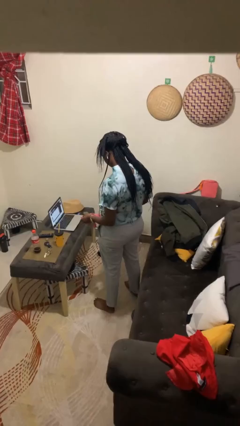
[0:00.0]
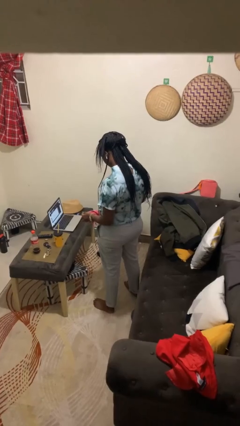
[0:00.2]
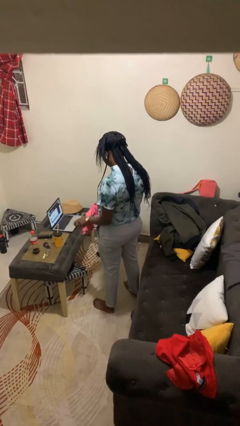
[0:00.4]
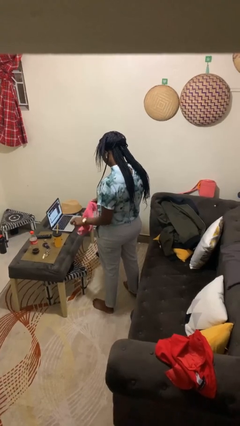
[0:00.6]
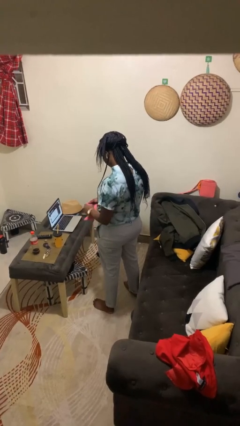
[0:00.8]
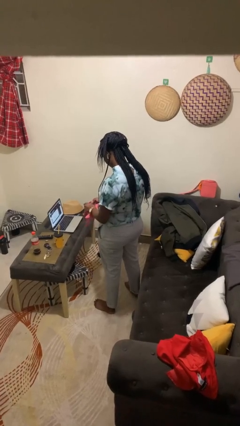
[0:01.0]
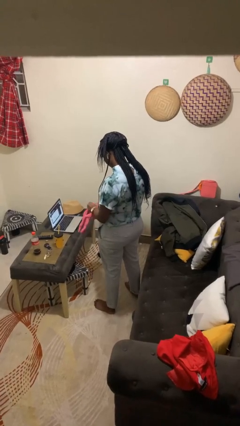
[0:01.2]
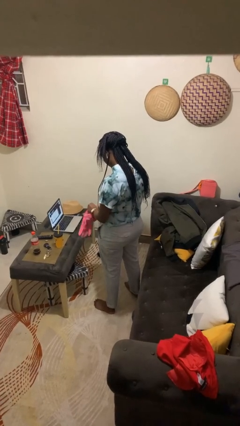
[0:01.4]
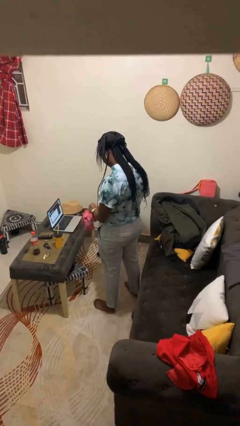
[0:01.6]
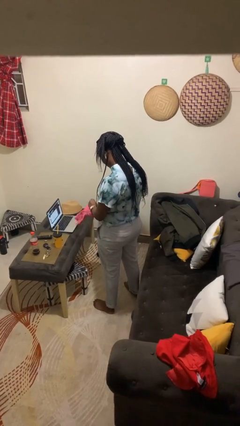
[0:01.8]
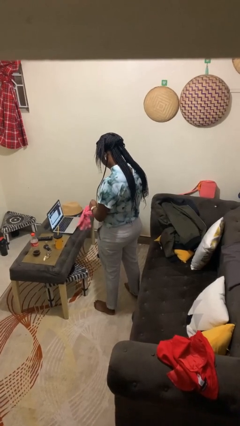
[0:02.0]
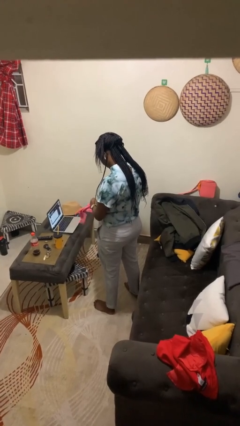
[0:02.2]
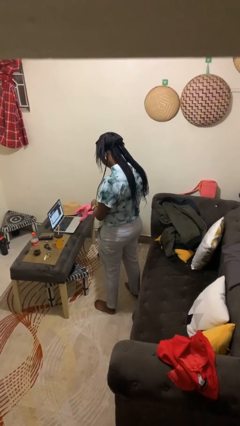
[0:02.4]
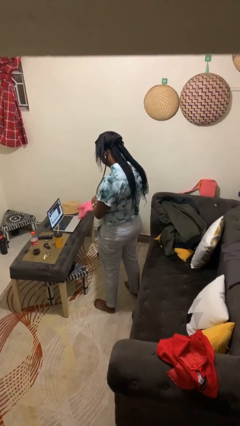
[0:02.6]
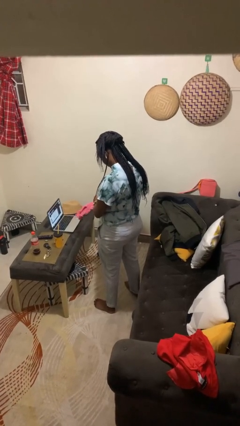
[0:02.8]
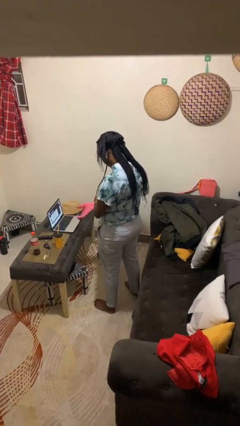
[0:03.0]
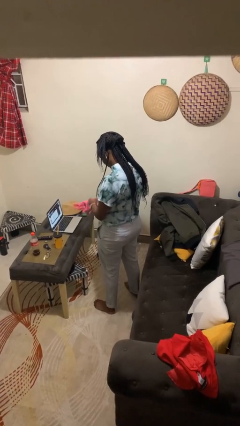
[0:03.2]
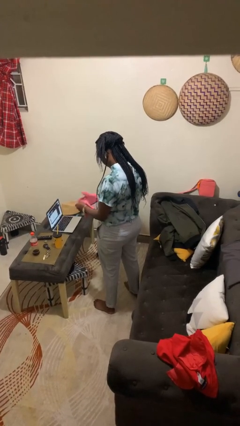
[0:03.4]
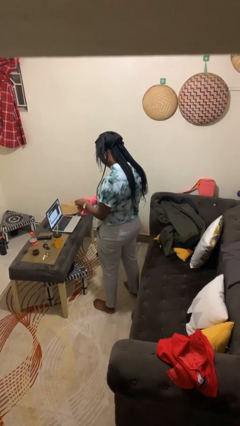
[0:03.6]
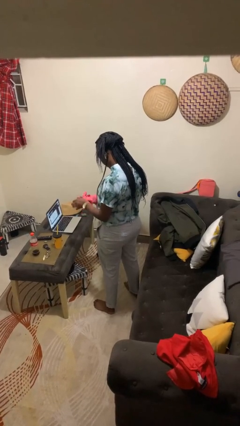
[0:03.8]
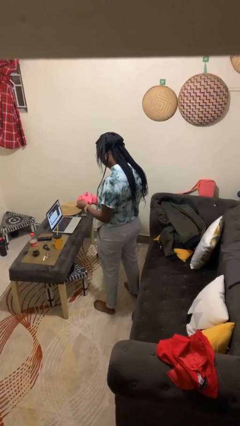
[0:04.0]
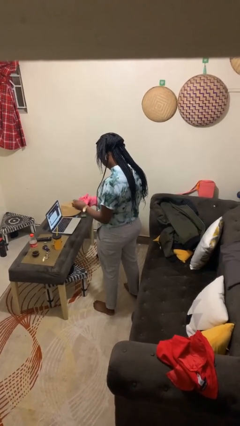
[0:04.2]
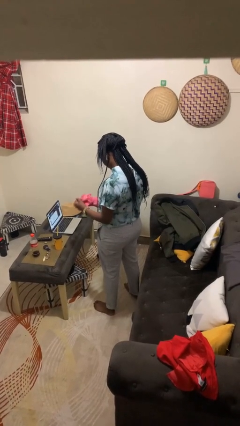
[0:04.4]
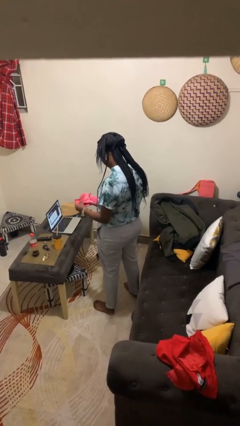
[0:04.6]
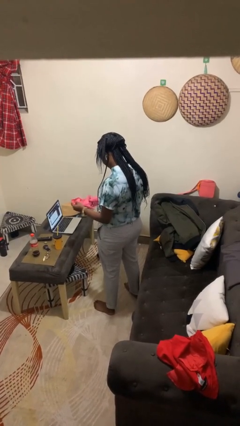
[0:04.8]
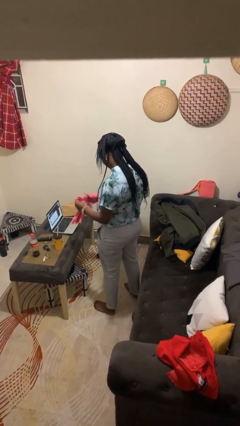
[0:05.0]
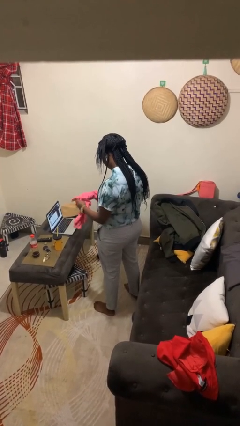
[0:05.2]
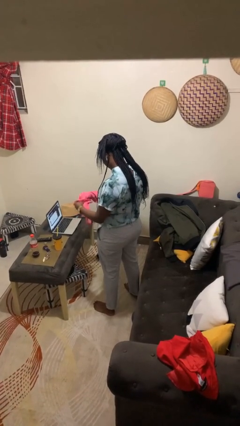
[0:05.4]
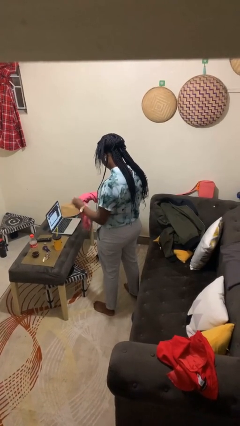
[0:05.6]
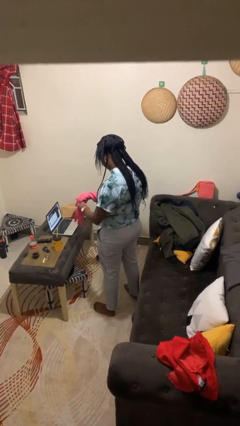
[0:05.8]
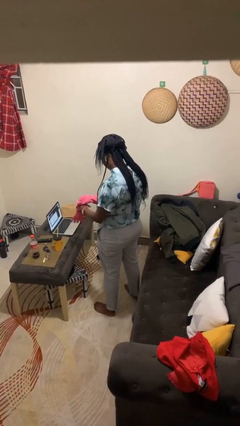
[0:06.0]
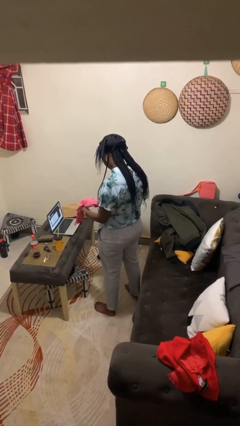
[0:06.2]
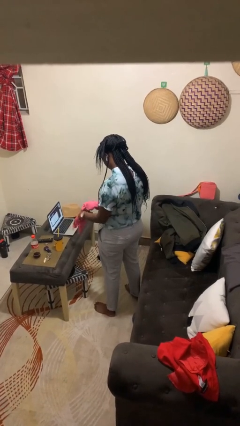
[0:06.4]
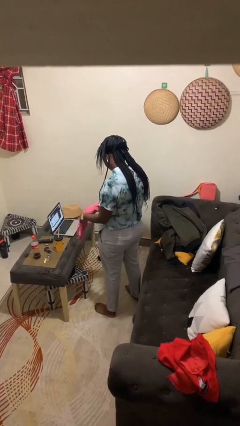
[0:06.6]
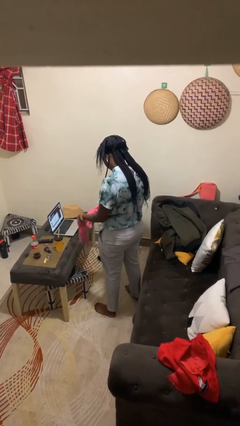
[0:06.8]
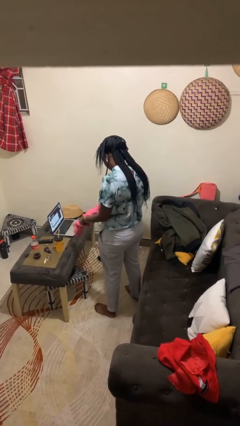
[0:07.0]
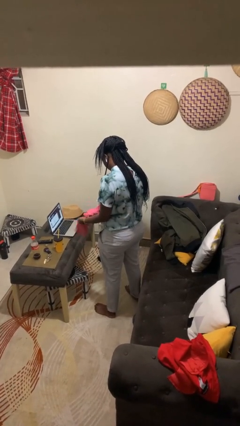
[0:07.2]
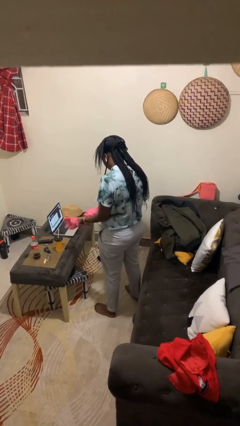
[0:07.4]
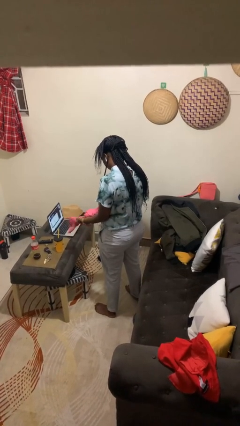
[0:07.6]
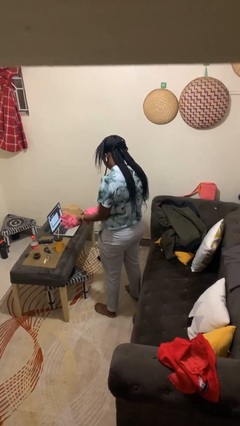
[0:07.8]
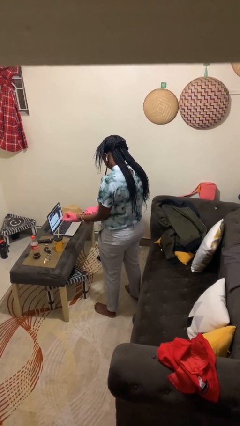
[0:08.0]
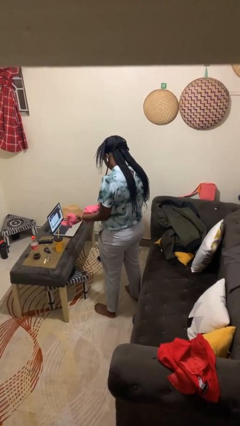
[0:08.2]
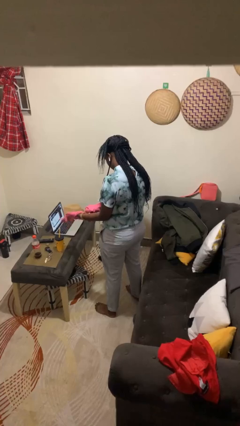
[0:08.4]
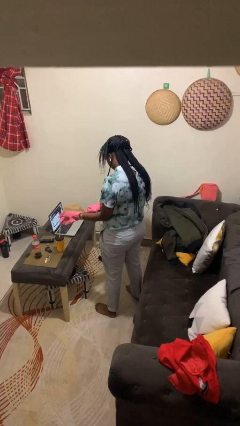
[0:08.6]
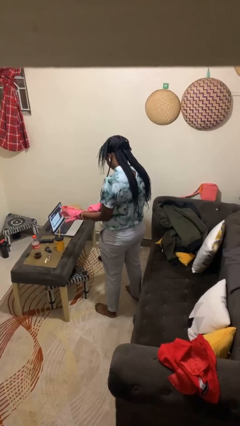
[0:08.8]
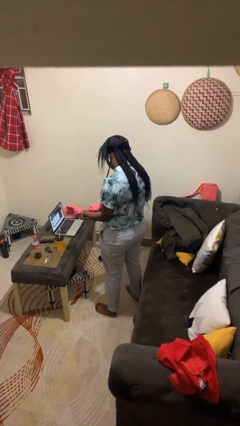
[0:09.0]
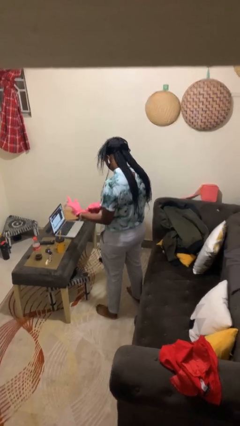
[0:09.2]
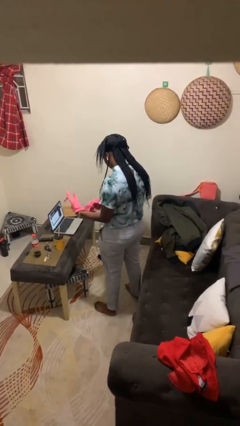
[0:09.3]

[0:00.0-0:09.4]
person puts on gloves

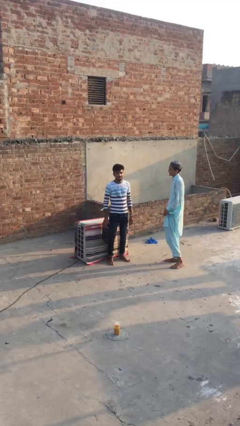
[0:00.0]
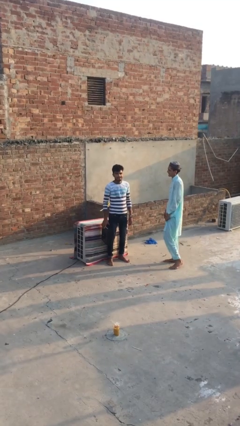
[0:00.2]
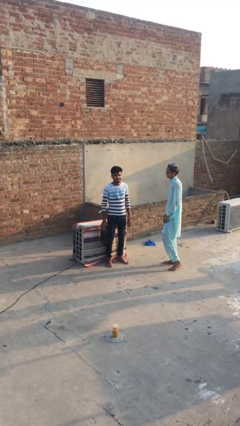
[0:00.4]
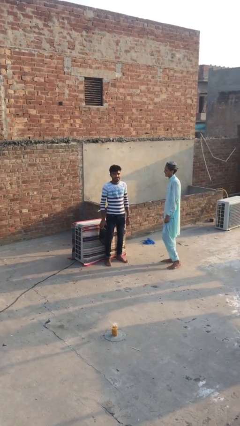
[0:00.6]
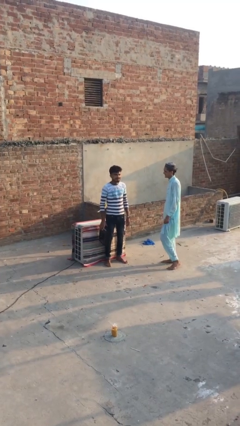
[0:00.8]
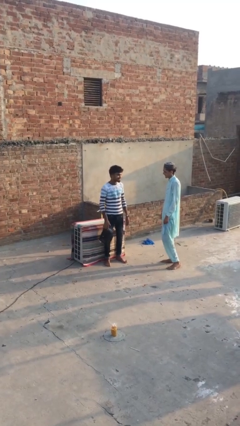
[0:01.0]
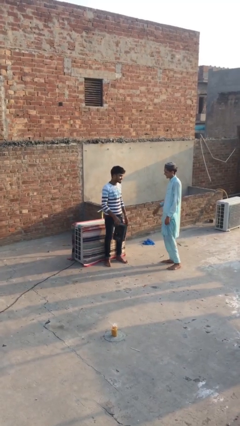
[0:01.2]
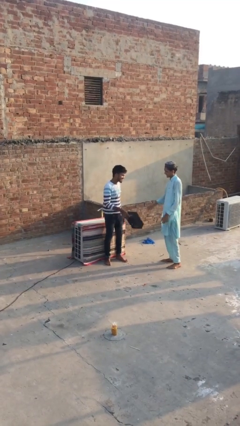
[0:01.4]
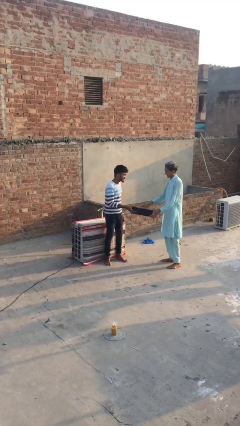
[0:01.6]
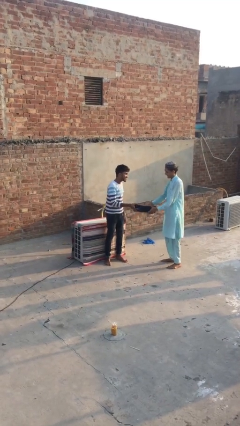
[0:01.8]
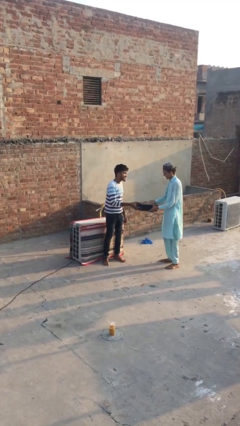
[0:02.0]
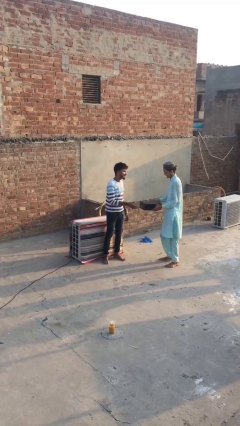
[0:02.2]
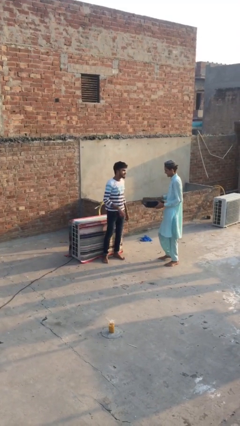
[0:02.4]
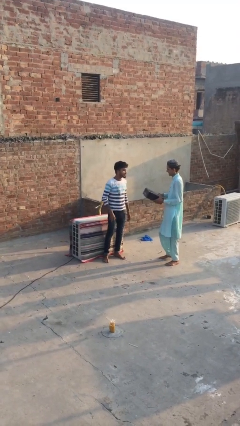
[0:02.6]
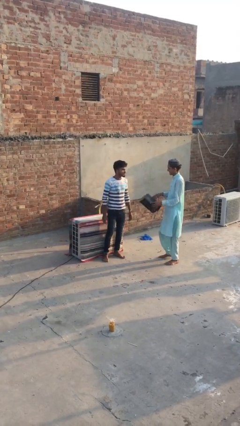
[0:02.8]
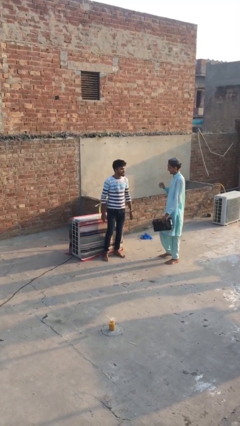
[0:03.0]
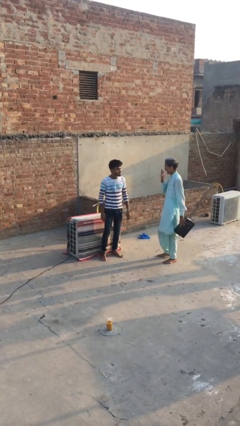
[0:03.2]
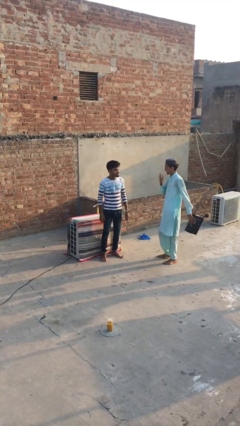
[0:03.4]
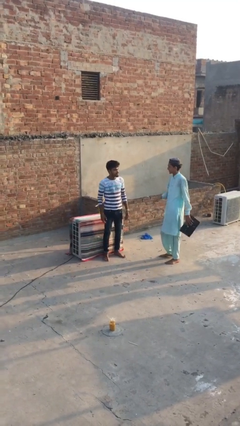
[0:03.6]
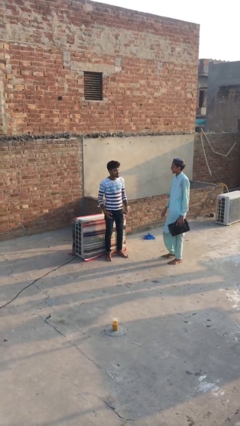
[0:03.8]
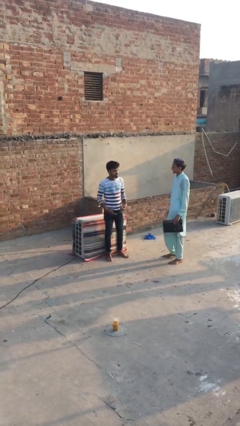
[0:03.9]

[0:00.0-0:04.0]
person transfers object to person

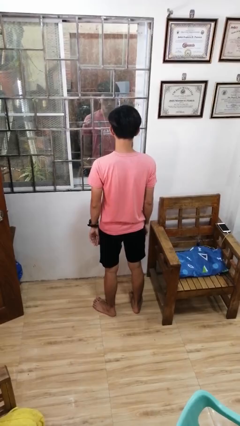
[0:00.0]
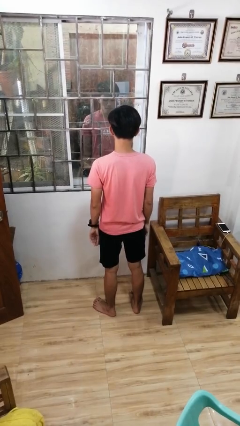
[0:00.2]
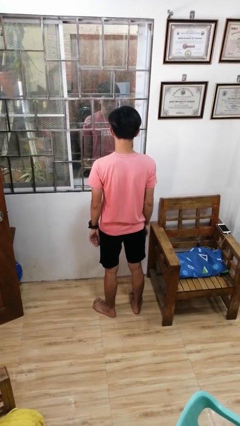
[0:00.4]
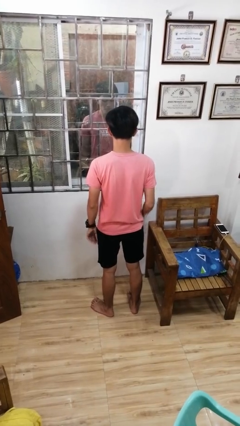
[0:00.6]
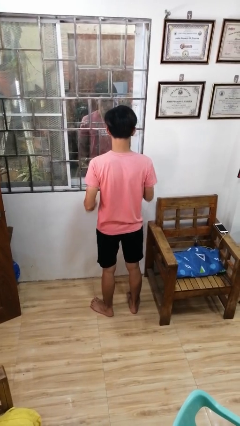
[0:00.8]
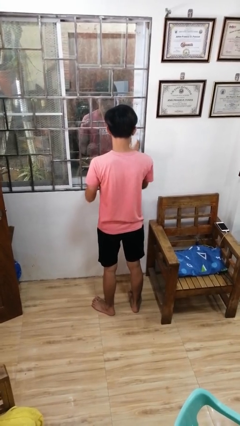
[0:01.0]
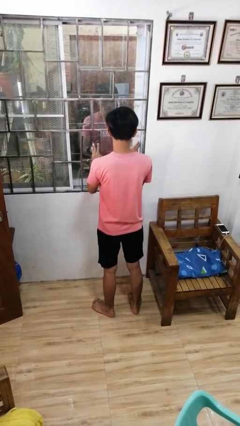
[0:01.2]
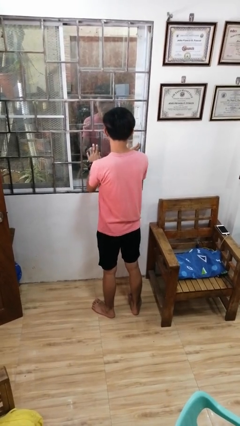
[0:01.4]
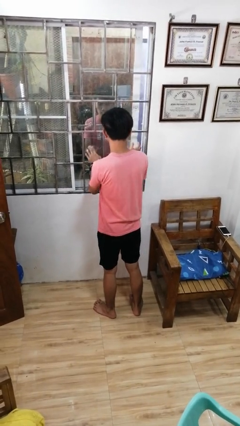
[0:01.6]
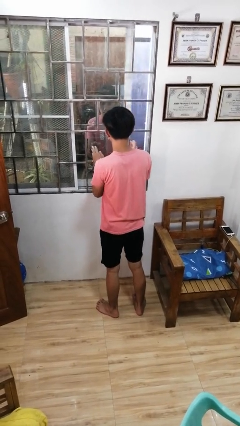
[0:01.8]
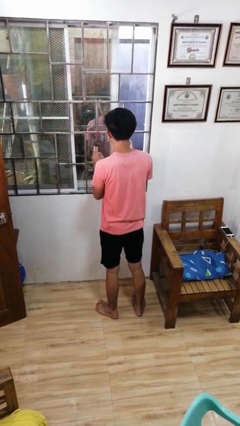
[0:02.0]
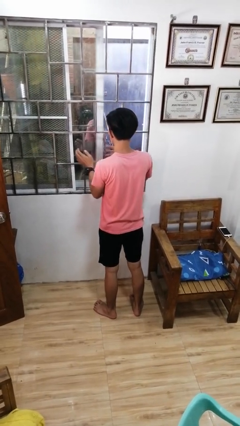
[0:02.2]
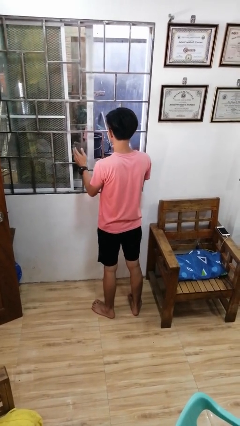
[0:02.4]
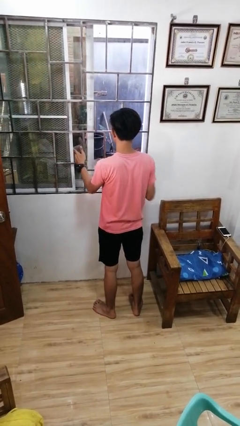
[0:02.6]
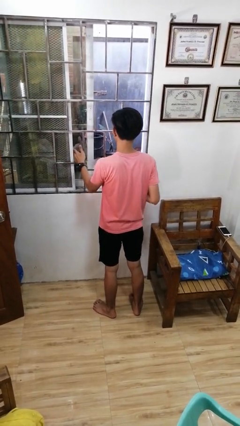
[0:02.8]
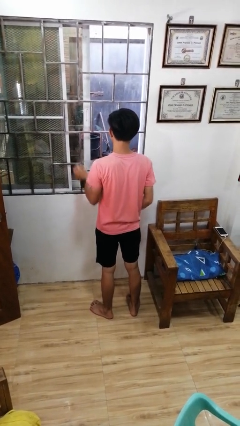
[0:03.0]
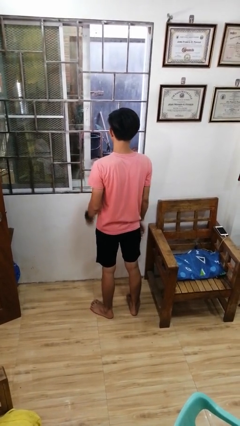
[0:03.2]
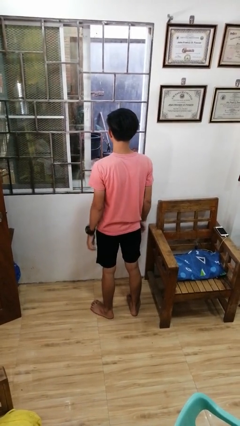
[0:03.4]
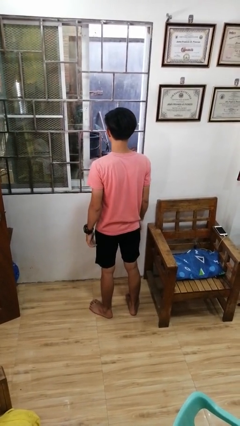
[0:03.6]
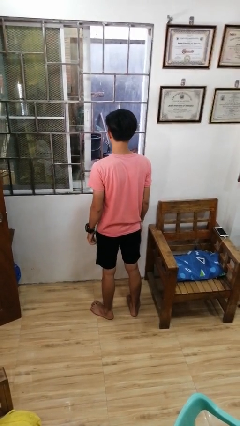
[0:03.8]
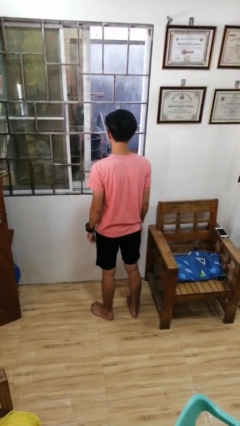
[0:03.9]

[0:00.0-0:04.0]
person opens home window

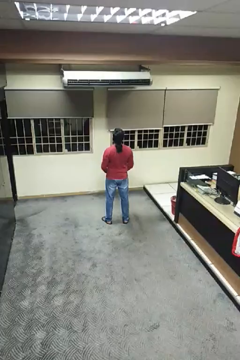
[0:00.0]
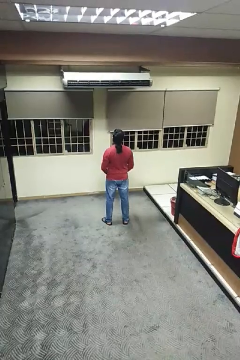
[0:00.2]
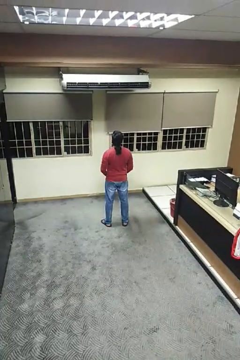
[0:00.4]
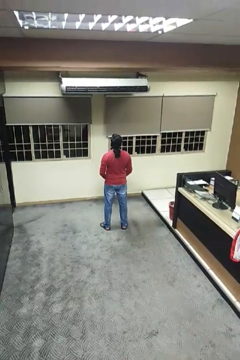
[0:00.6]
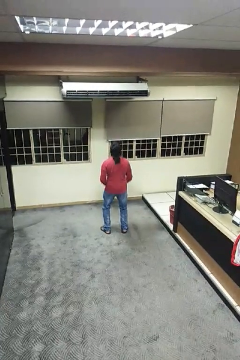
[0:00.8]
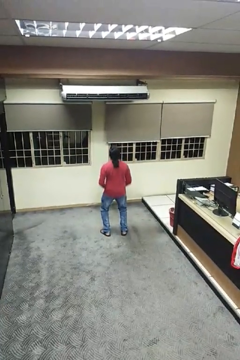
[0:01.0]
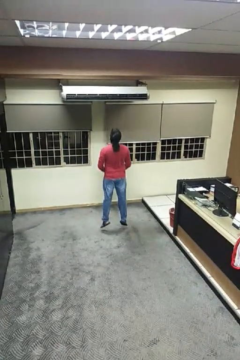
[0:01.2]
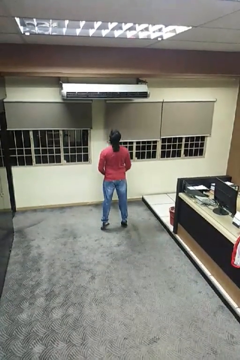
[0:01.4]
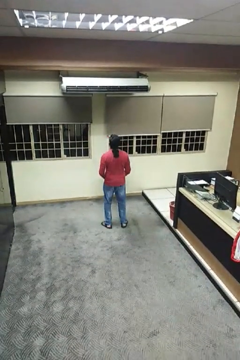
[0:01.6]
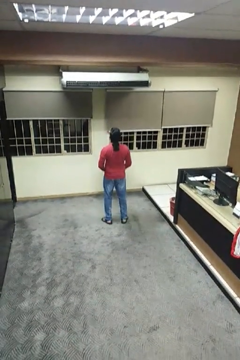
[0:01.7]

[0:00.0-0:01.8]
person jumps
